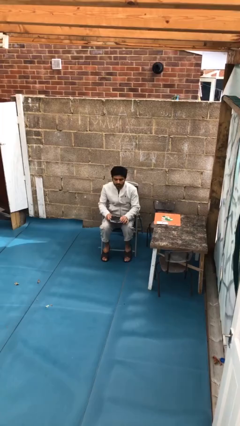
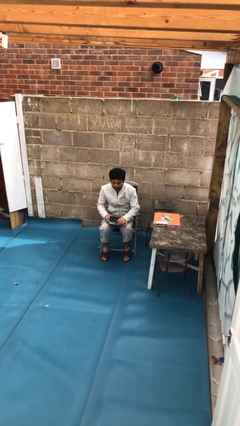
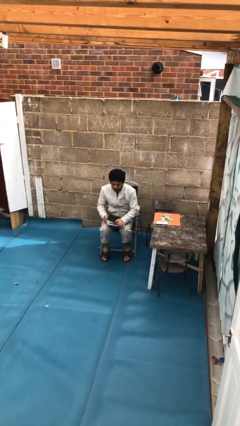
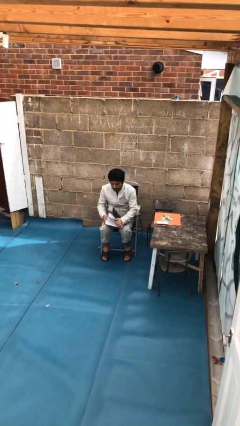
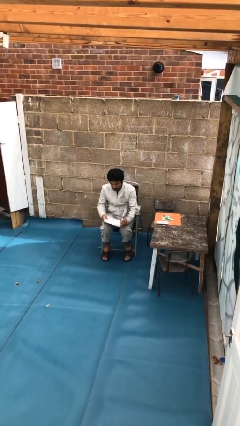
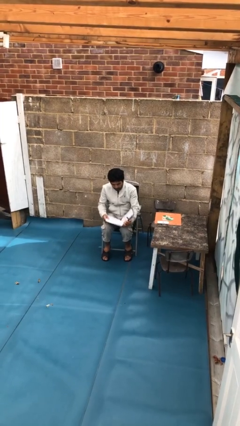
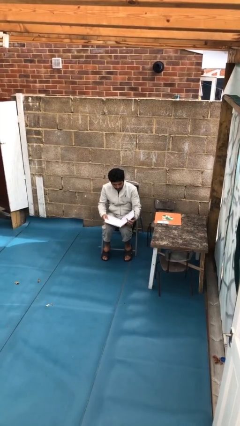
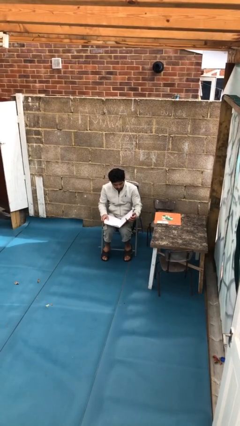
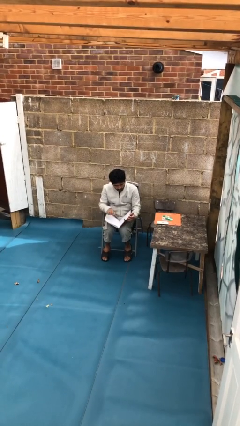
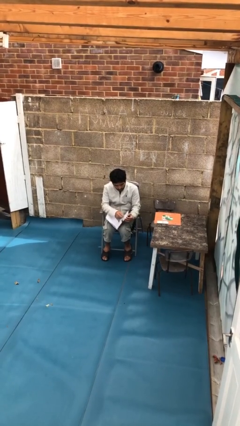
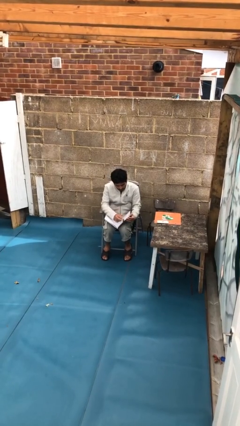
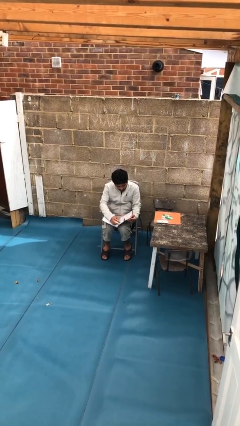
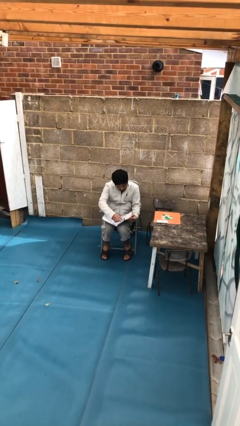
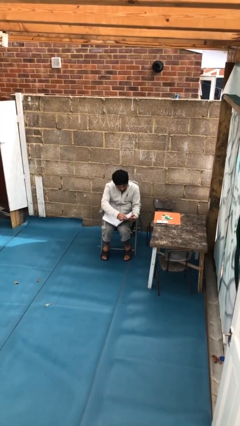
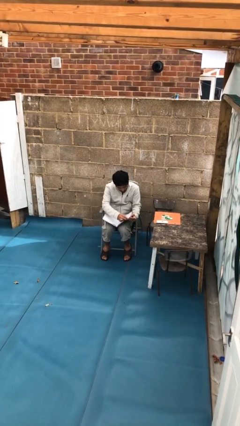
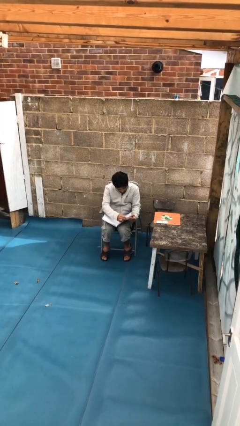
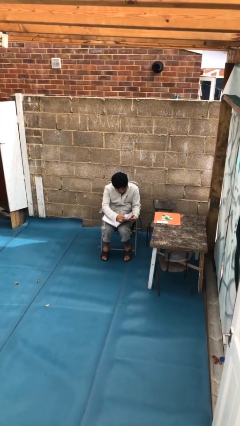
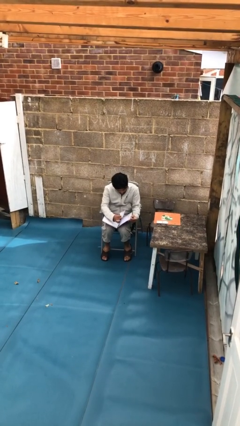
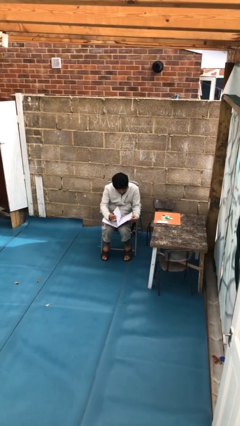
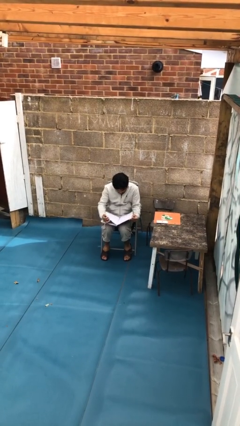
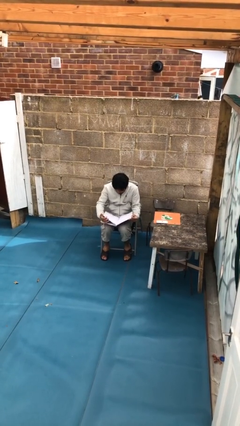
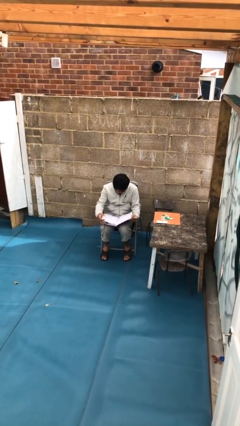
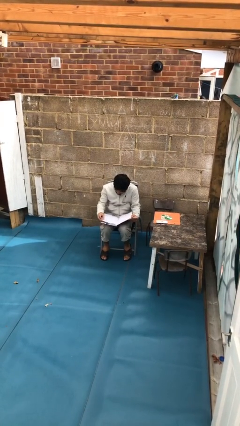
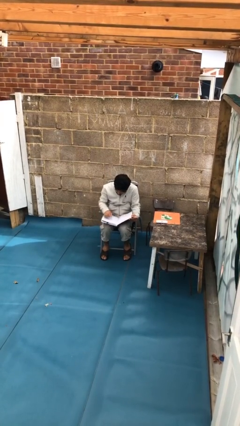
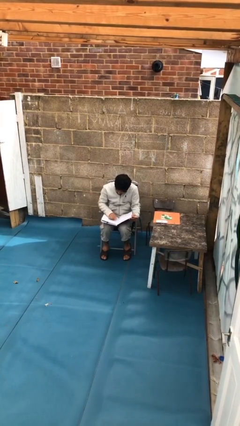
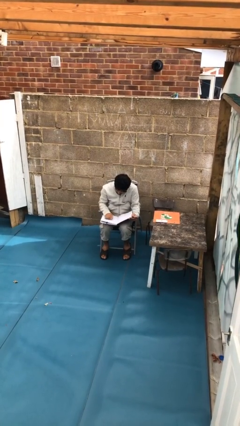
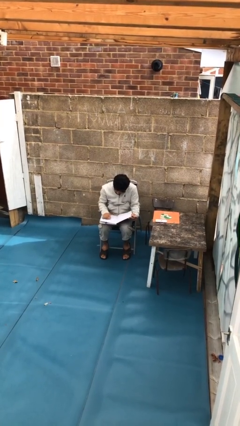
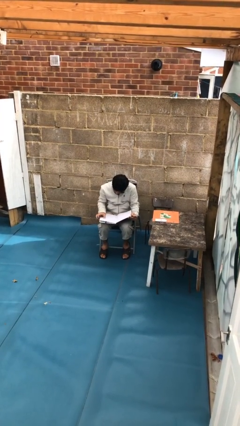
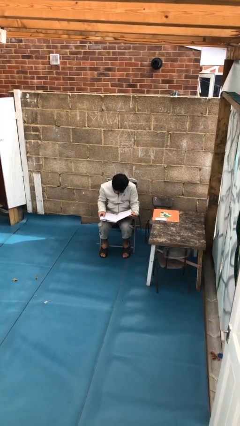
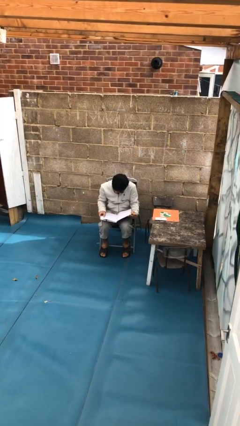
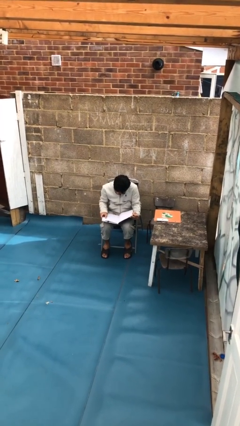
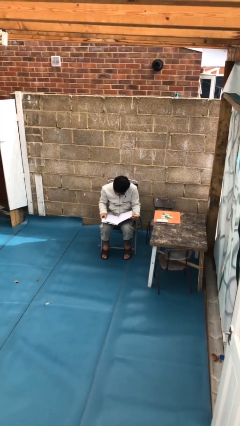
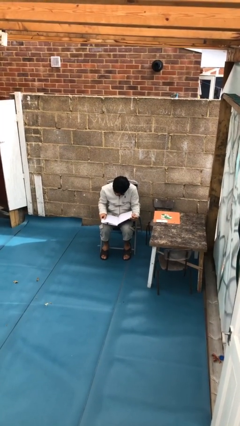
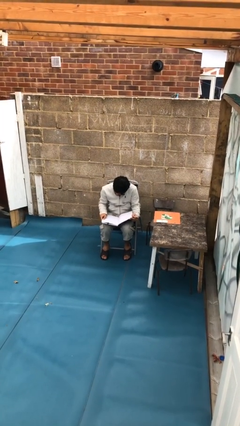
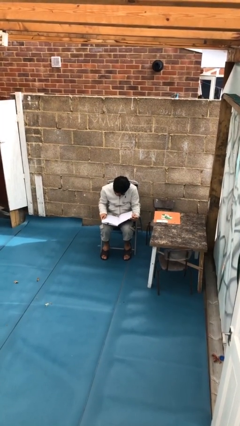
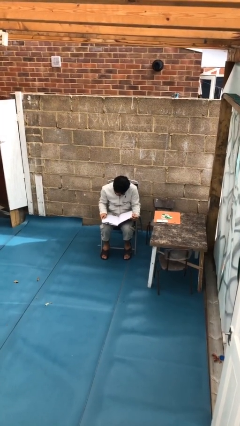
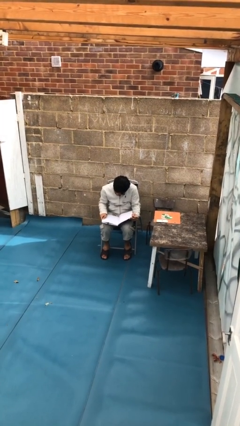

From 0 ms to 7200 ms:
person reads document

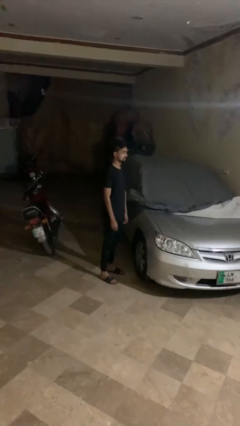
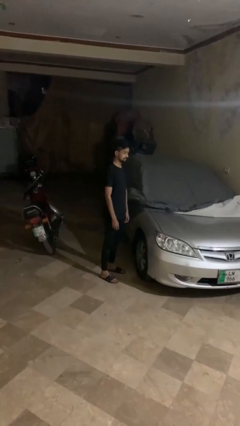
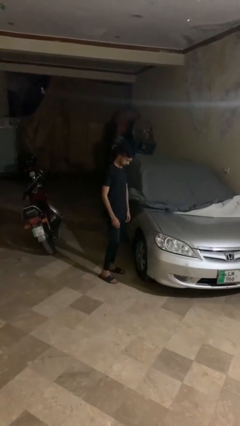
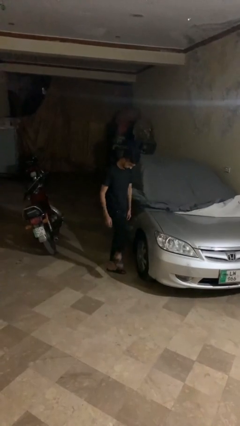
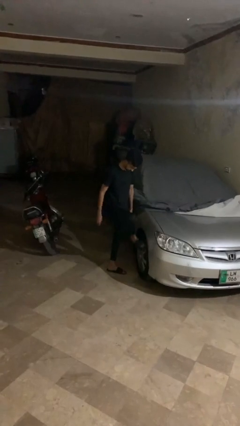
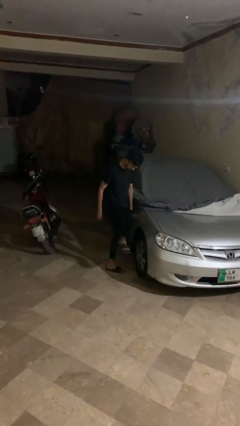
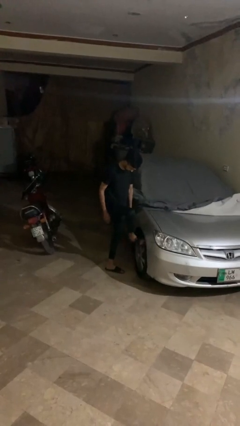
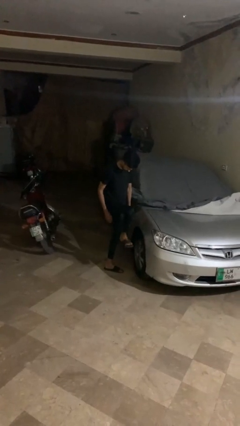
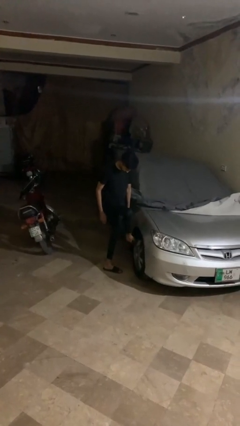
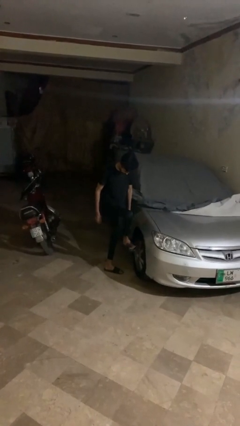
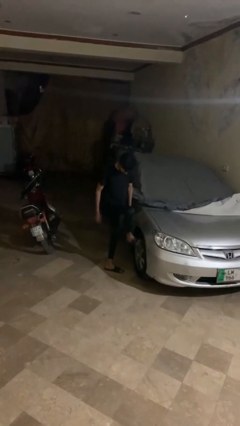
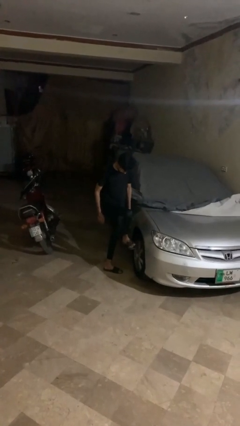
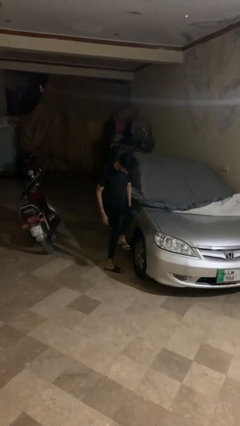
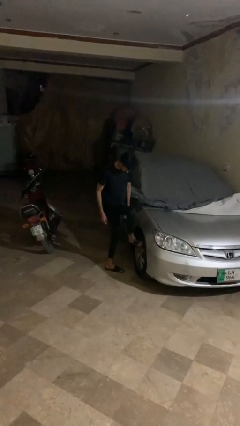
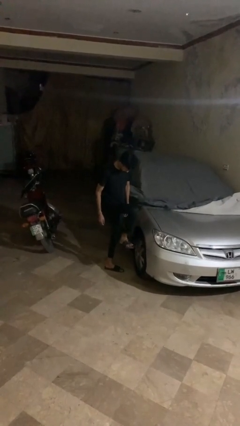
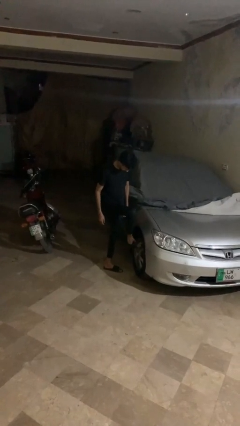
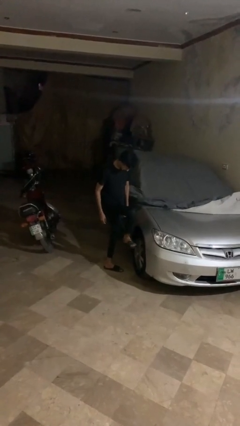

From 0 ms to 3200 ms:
person kicks car tires

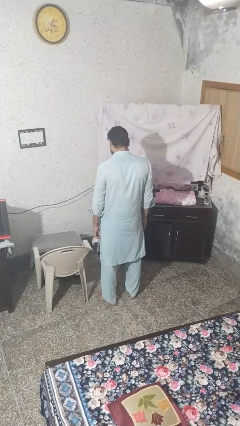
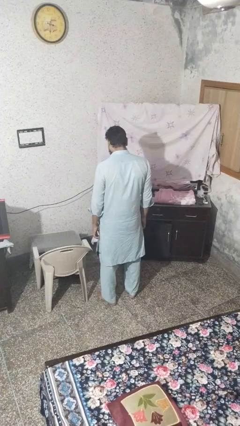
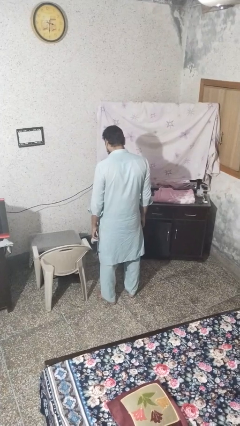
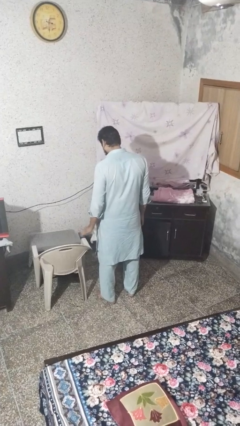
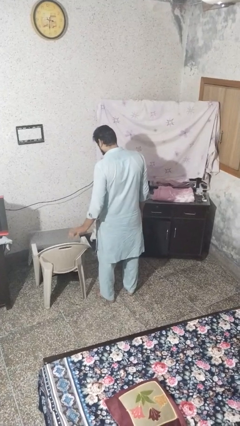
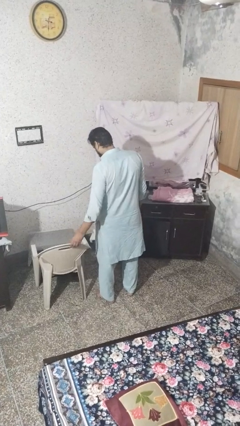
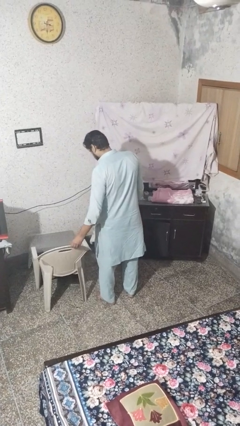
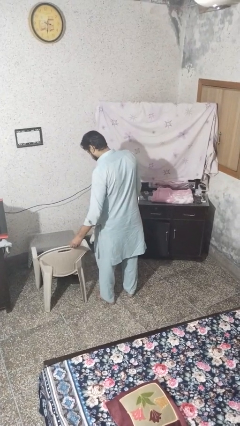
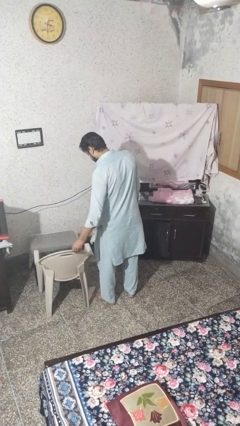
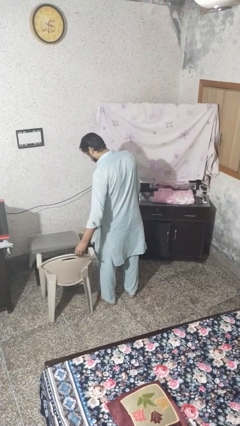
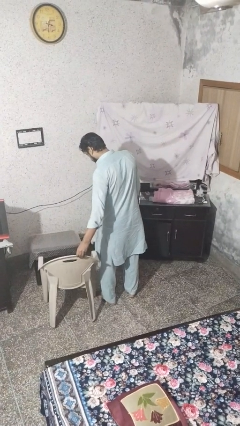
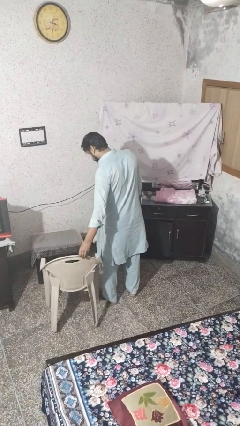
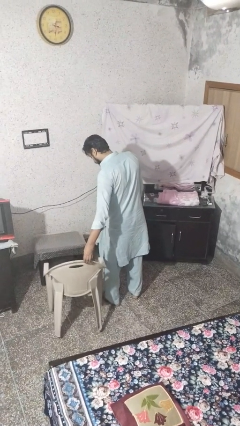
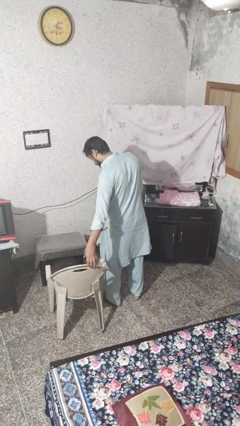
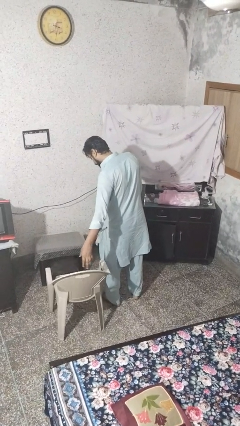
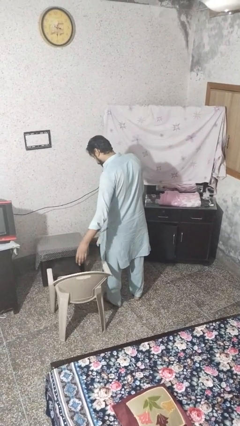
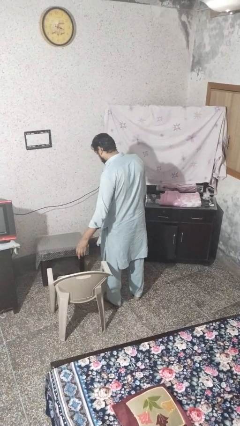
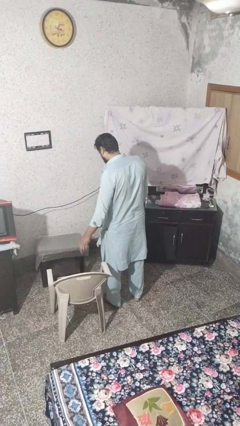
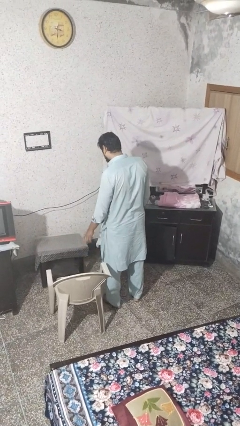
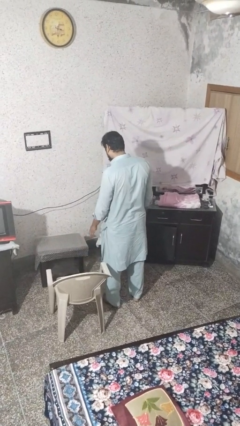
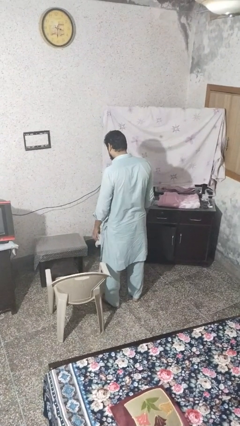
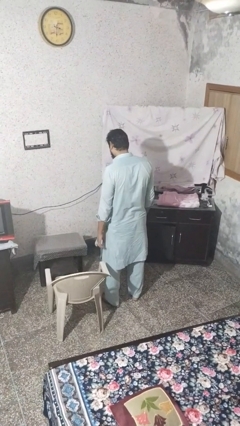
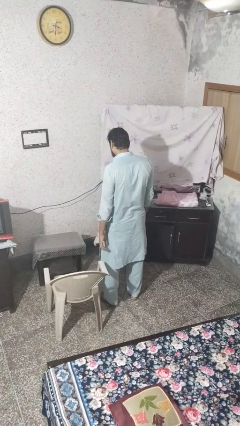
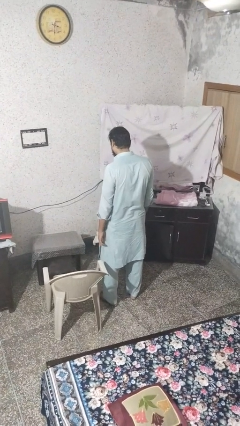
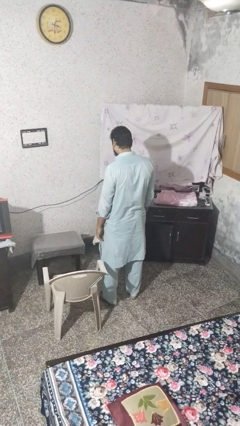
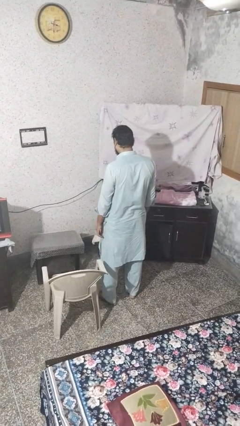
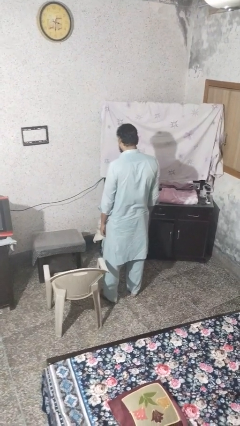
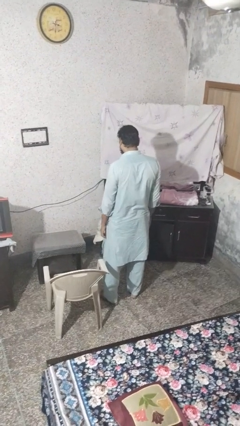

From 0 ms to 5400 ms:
person pulls out chair

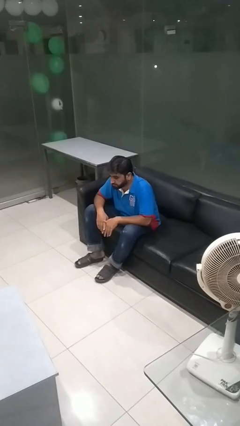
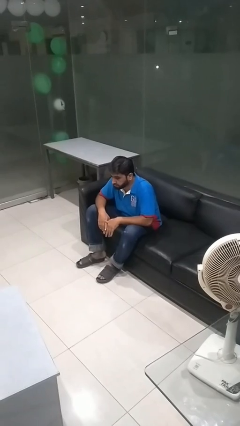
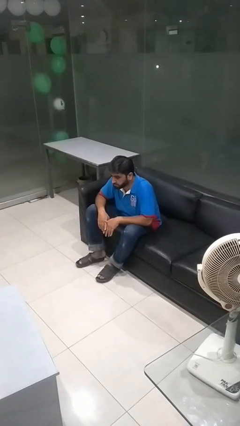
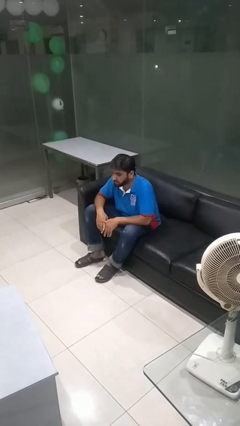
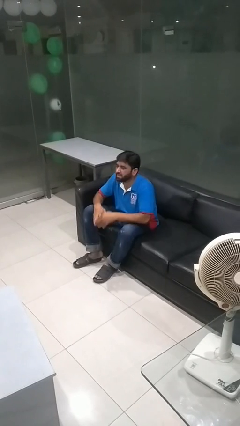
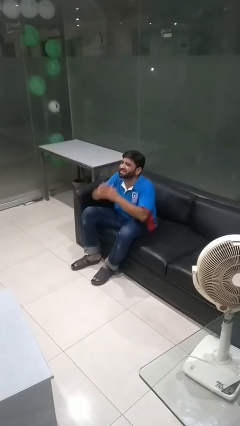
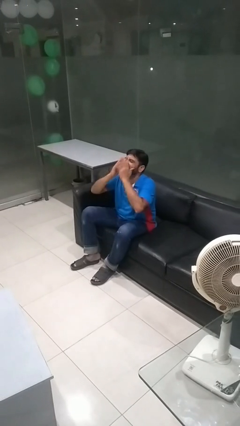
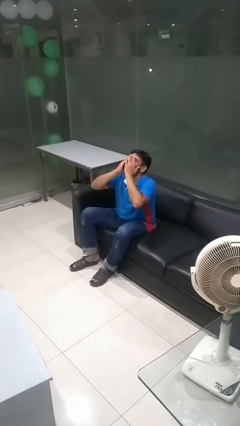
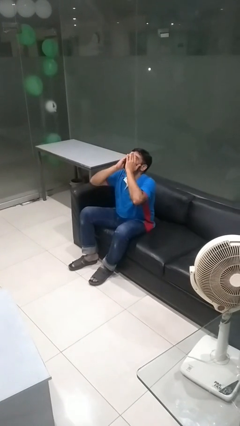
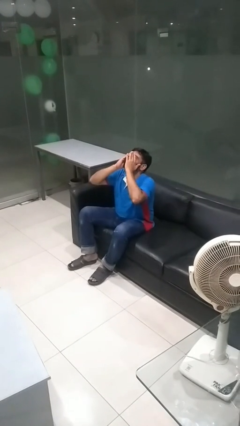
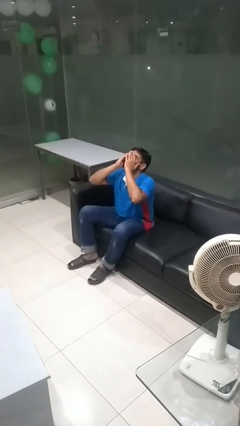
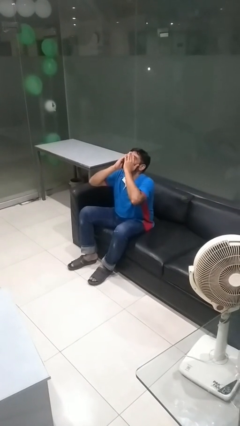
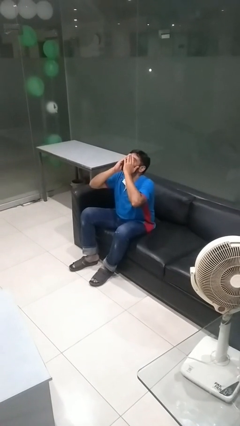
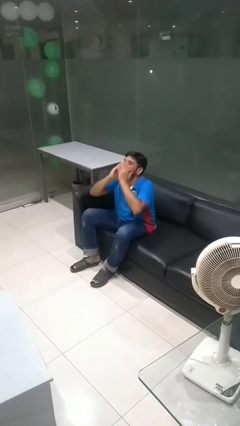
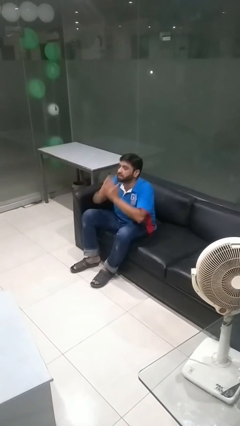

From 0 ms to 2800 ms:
person covers face with hands
